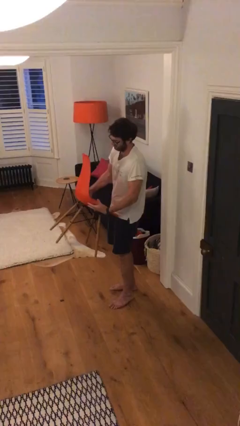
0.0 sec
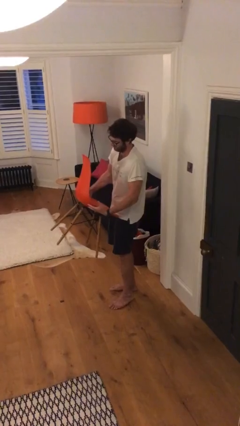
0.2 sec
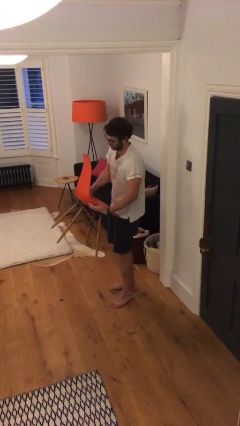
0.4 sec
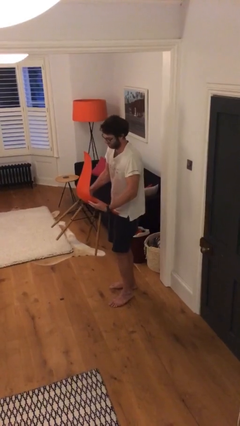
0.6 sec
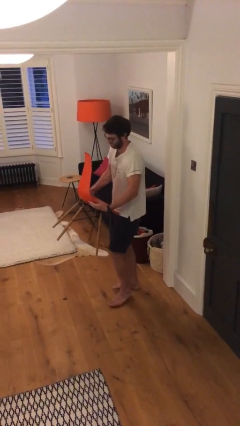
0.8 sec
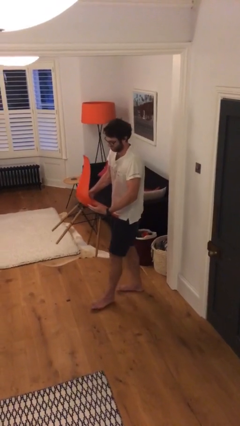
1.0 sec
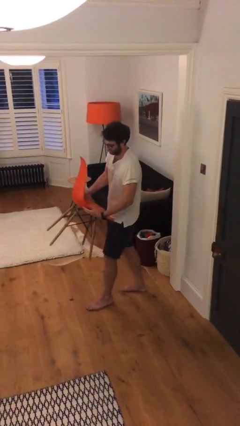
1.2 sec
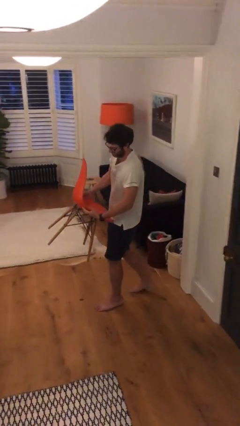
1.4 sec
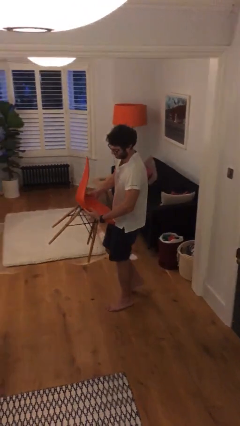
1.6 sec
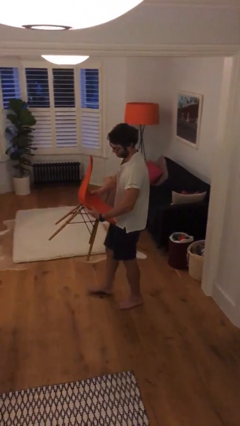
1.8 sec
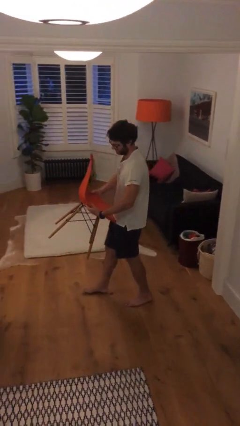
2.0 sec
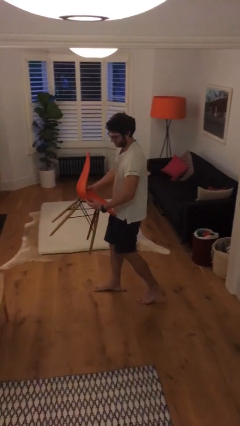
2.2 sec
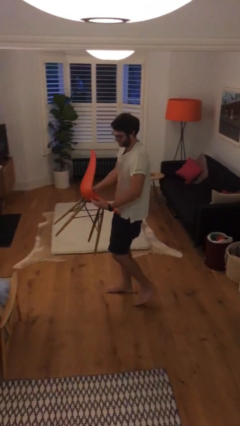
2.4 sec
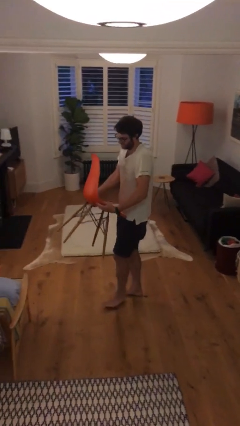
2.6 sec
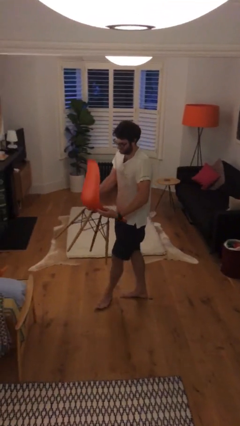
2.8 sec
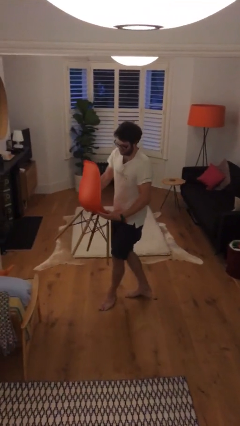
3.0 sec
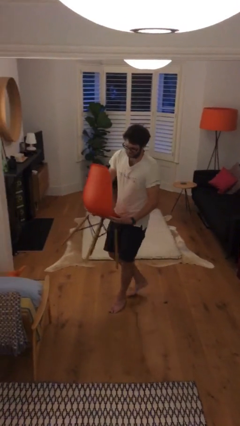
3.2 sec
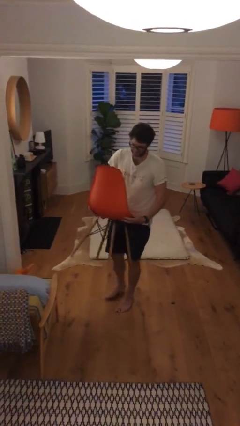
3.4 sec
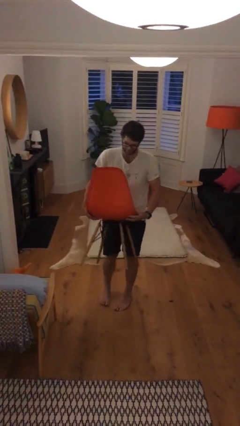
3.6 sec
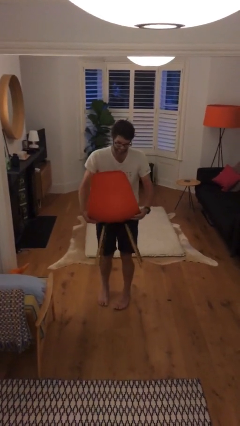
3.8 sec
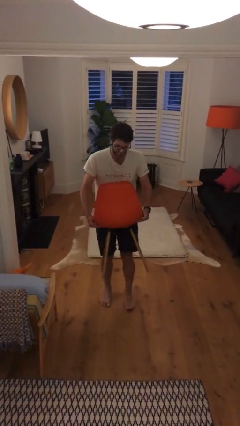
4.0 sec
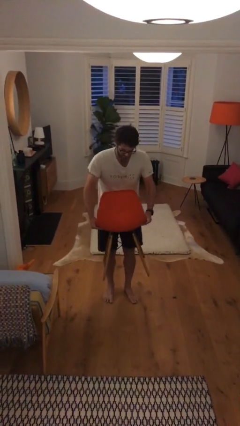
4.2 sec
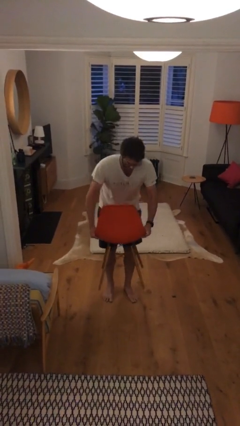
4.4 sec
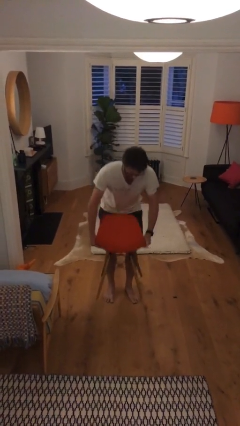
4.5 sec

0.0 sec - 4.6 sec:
person carries heavy object

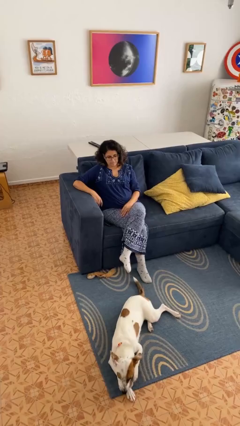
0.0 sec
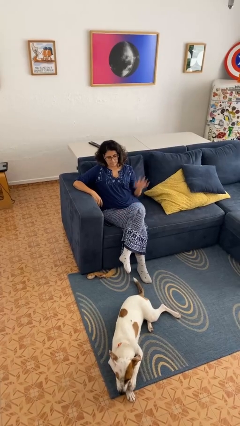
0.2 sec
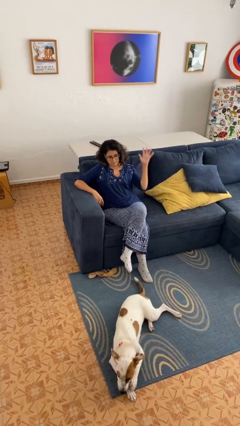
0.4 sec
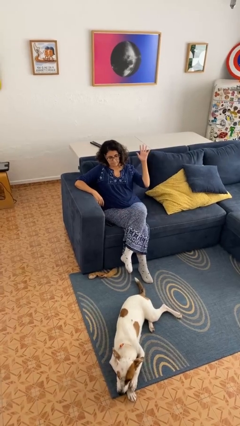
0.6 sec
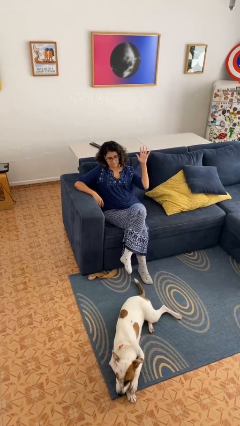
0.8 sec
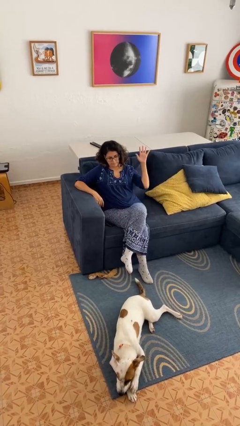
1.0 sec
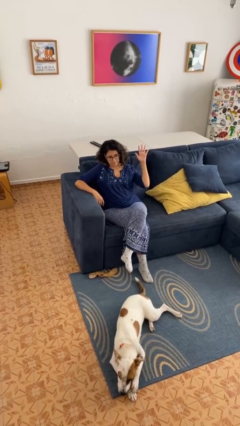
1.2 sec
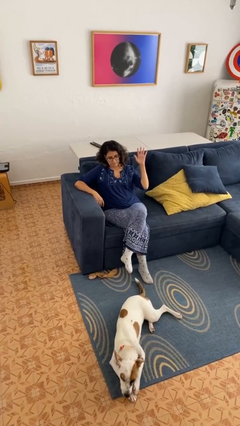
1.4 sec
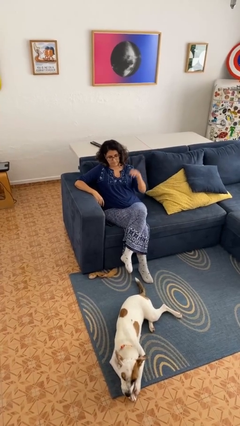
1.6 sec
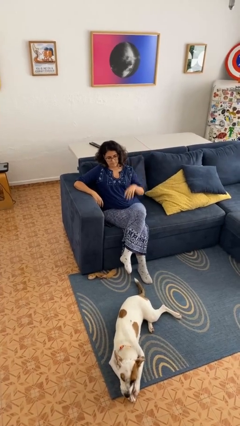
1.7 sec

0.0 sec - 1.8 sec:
person gestures number five

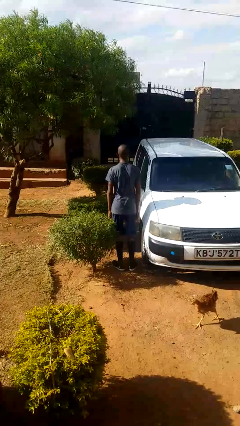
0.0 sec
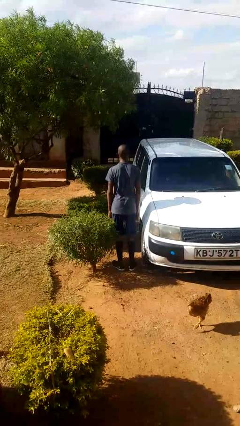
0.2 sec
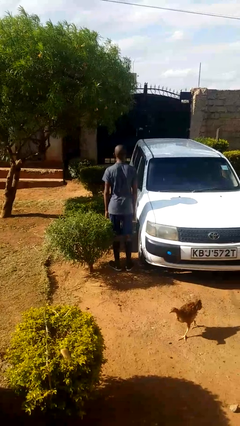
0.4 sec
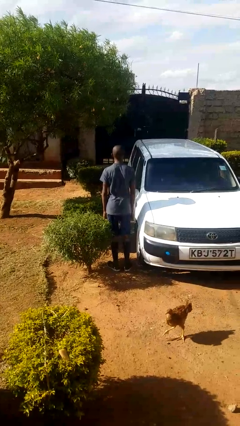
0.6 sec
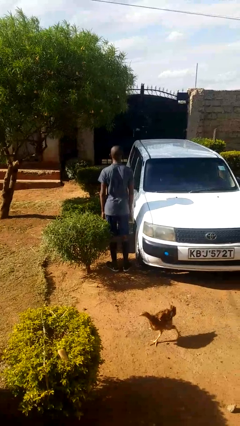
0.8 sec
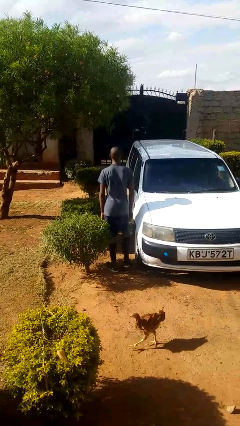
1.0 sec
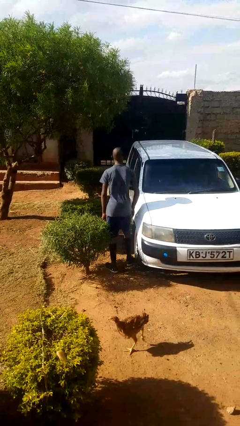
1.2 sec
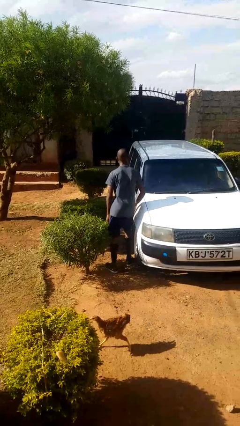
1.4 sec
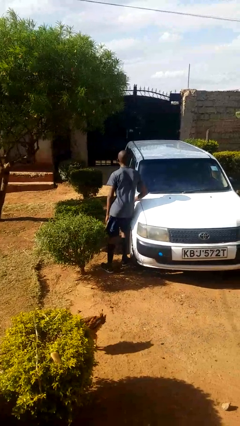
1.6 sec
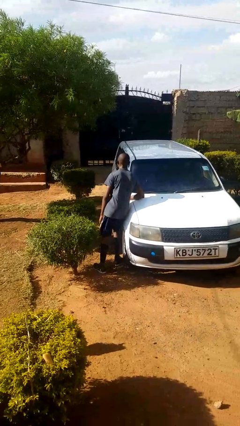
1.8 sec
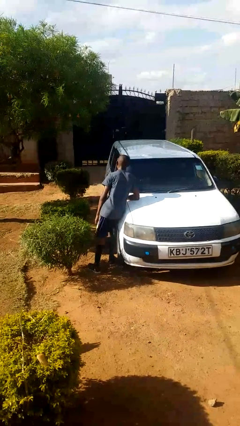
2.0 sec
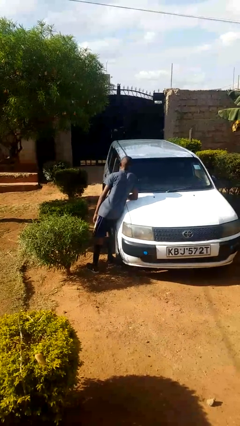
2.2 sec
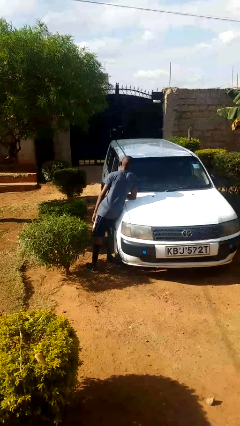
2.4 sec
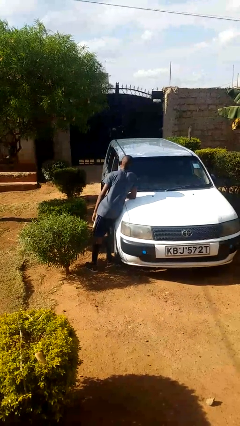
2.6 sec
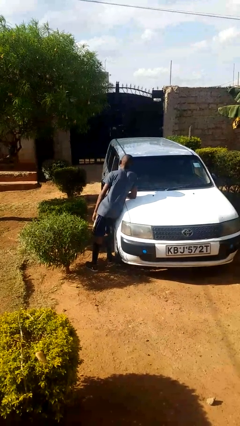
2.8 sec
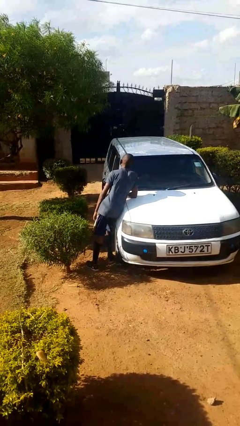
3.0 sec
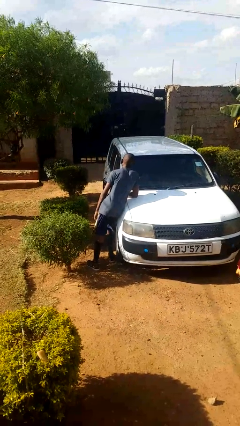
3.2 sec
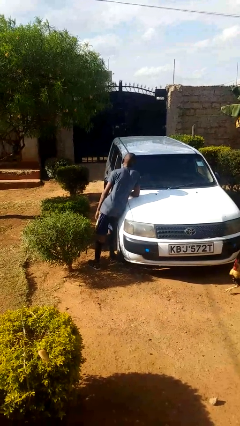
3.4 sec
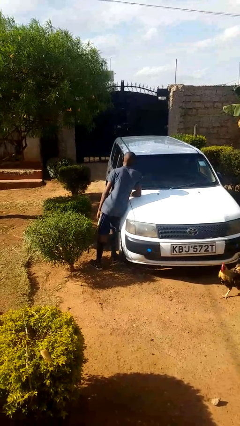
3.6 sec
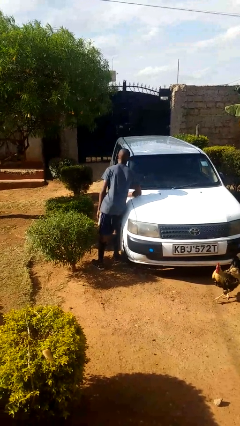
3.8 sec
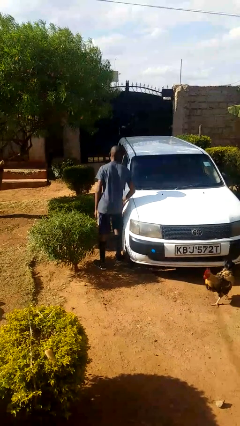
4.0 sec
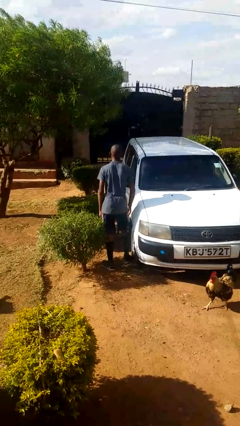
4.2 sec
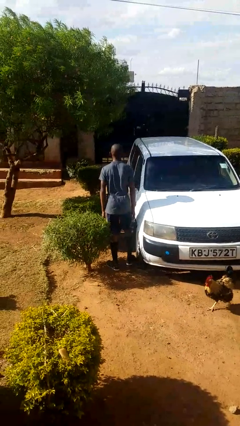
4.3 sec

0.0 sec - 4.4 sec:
person leans against car

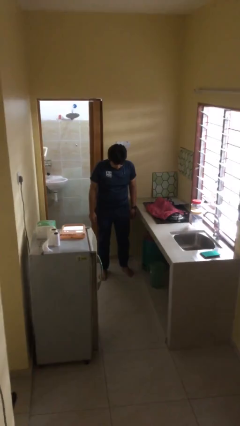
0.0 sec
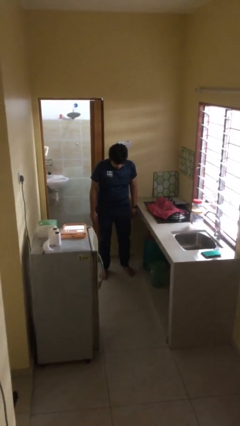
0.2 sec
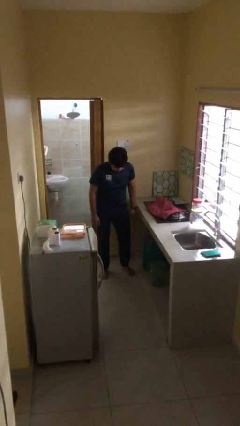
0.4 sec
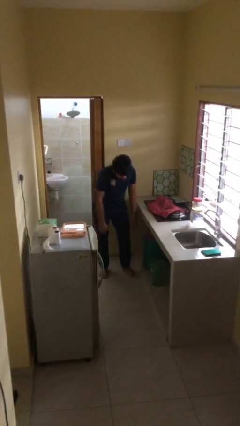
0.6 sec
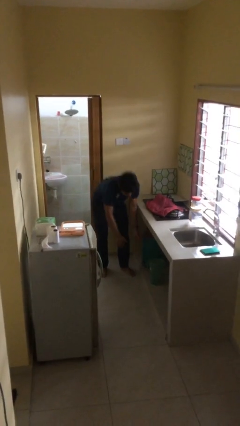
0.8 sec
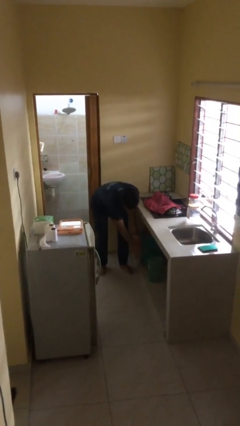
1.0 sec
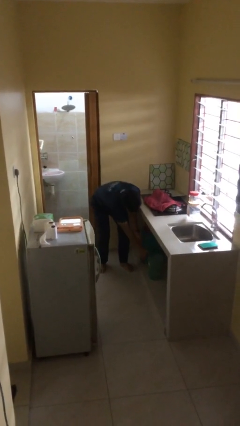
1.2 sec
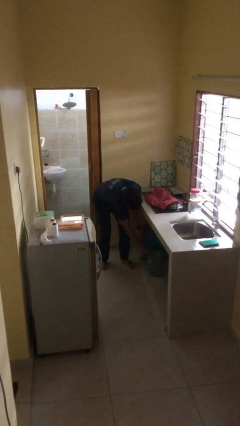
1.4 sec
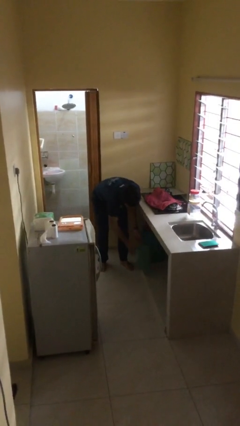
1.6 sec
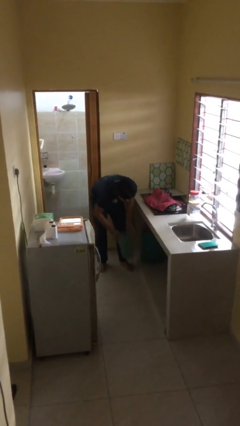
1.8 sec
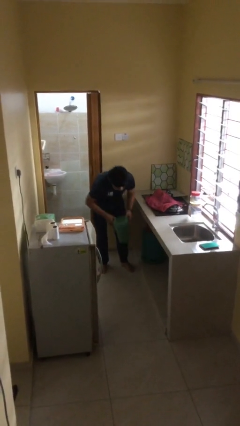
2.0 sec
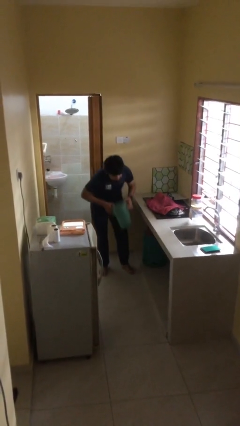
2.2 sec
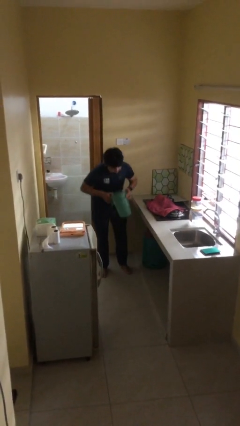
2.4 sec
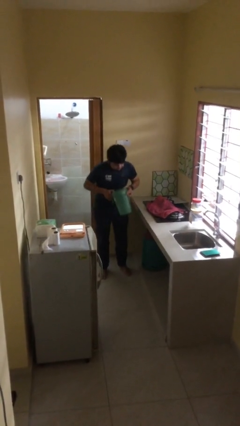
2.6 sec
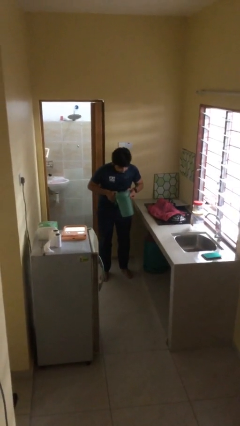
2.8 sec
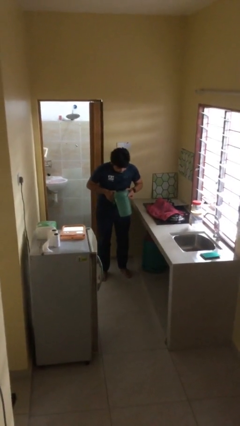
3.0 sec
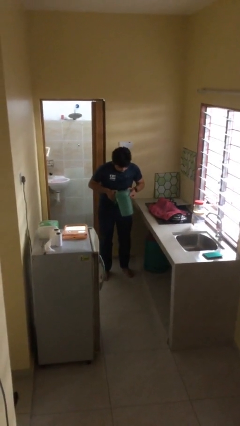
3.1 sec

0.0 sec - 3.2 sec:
person picks up object from cabinet

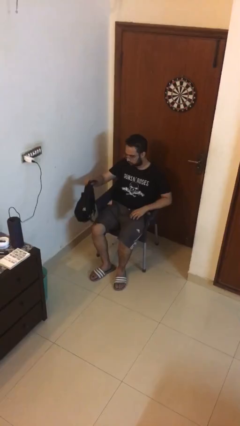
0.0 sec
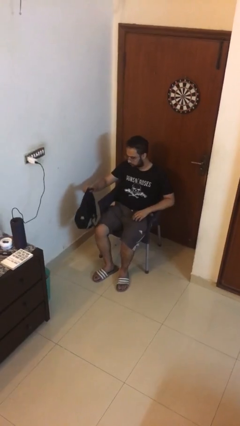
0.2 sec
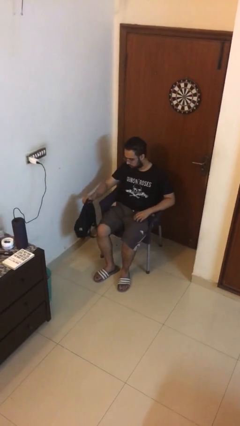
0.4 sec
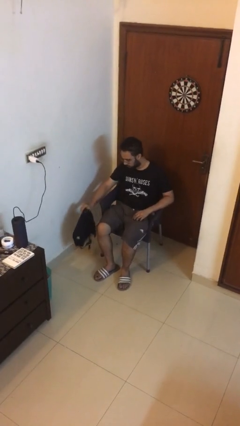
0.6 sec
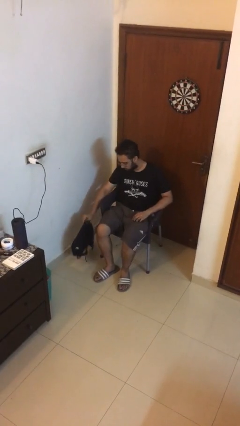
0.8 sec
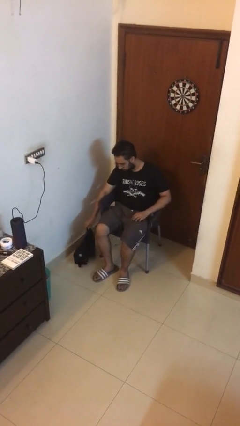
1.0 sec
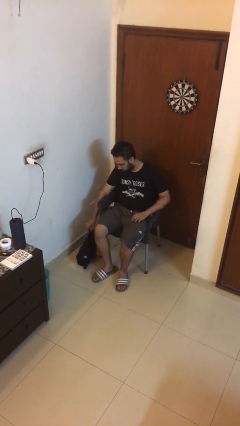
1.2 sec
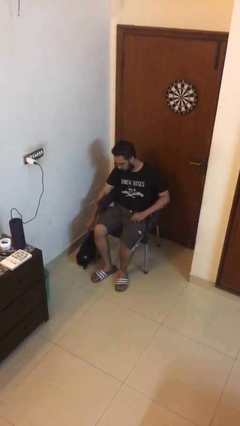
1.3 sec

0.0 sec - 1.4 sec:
person puts down object on floor

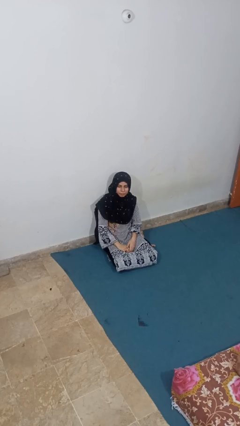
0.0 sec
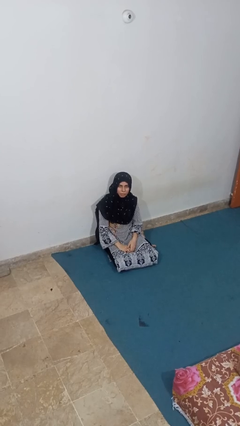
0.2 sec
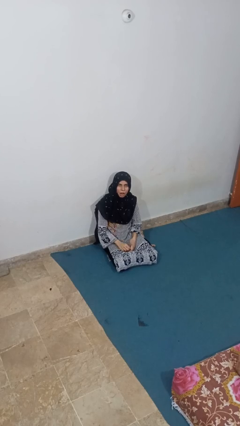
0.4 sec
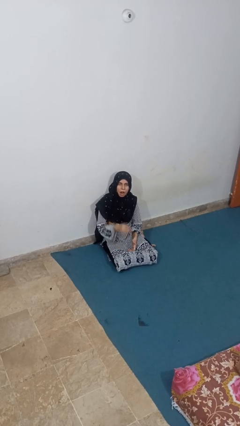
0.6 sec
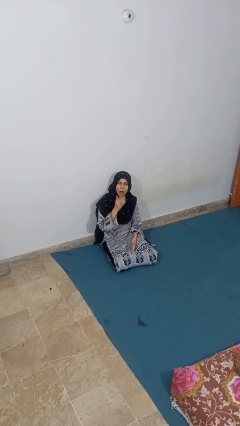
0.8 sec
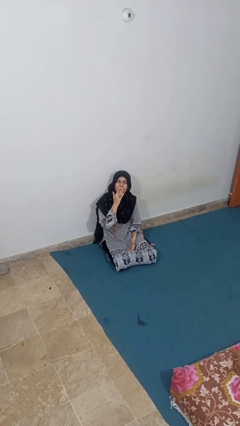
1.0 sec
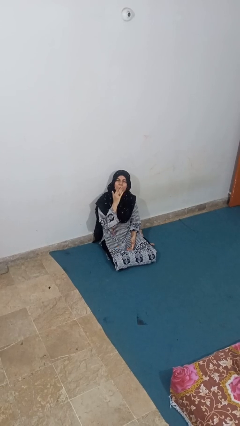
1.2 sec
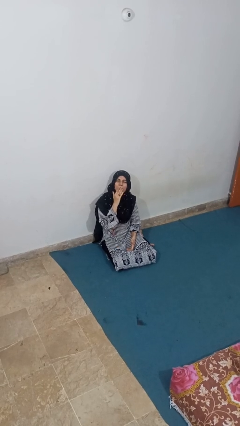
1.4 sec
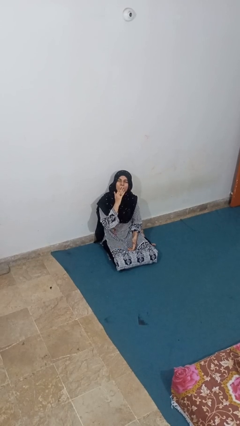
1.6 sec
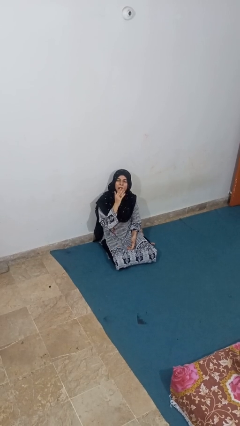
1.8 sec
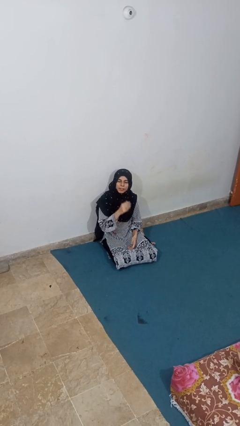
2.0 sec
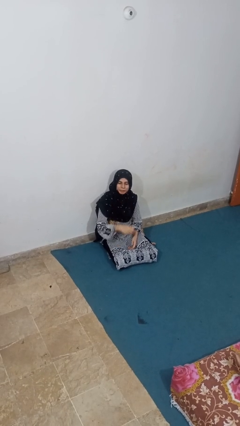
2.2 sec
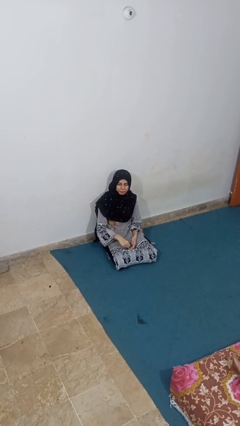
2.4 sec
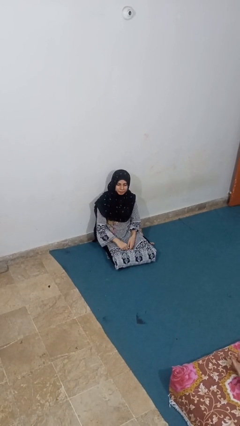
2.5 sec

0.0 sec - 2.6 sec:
person yawns
